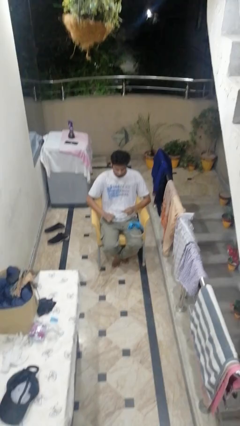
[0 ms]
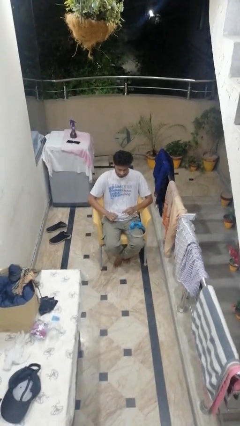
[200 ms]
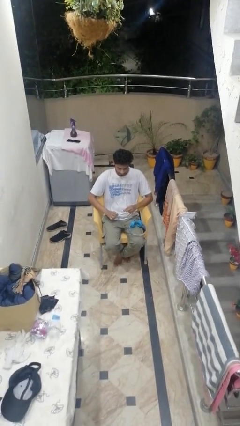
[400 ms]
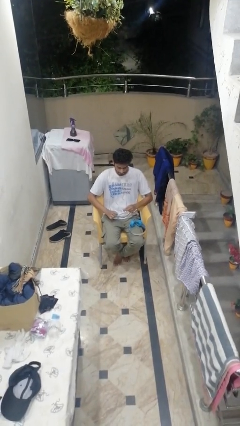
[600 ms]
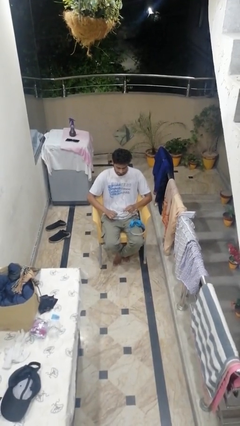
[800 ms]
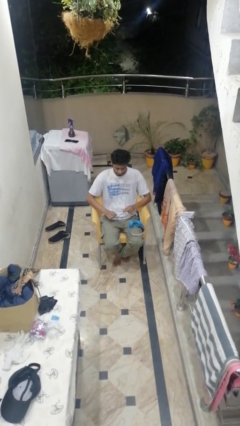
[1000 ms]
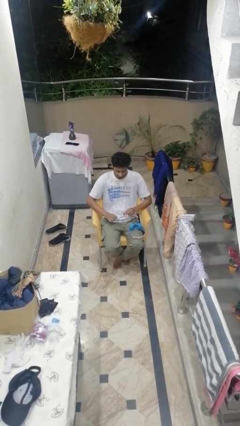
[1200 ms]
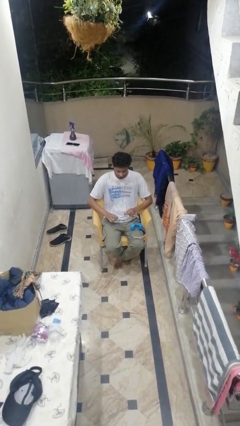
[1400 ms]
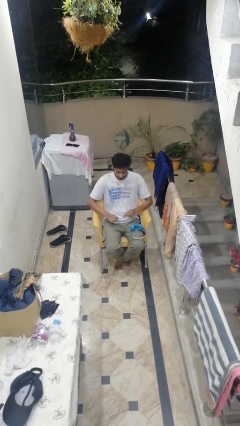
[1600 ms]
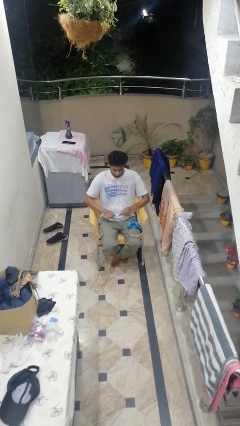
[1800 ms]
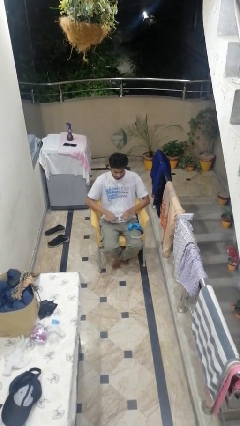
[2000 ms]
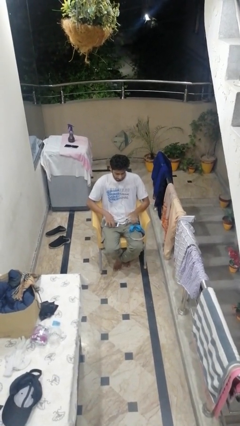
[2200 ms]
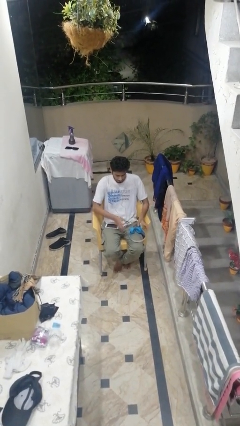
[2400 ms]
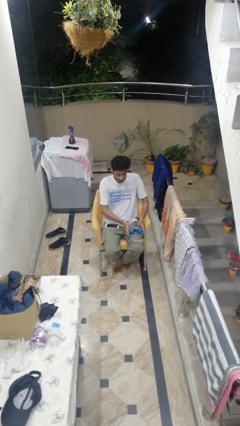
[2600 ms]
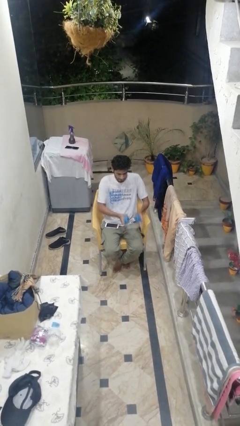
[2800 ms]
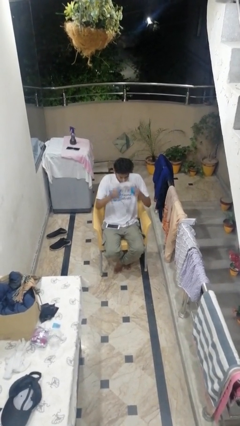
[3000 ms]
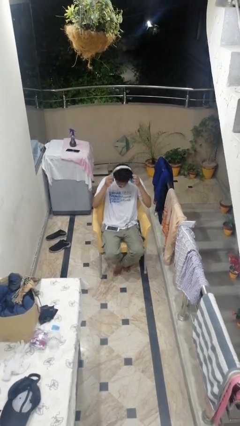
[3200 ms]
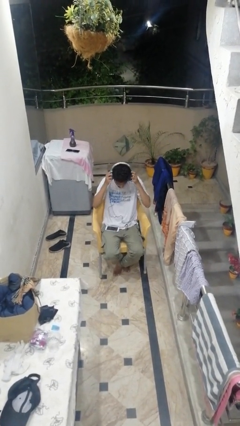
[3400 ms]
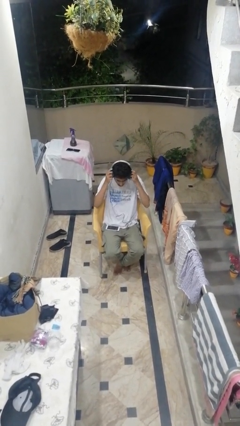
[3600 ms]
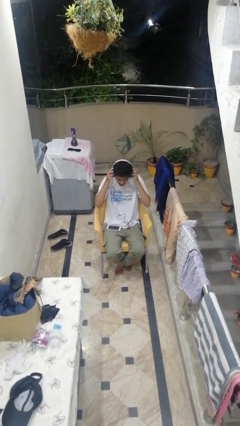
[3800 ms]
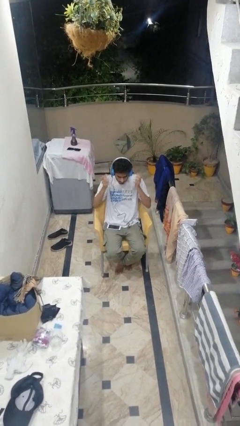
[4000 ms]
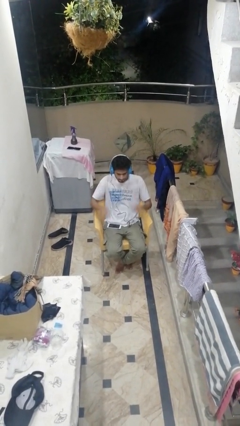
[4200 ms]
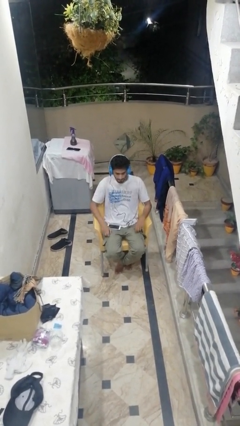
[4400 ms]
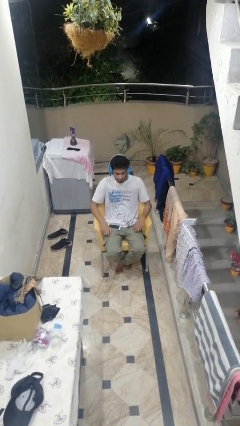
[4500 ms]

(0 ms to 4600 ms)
person puts on headphones

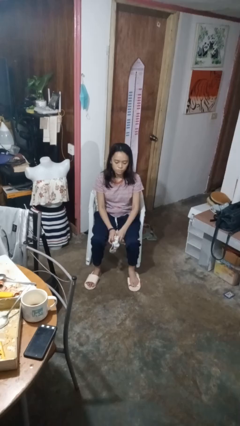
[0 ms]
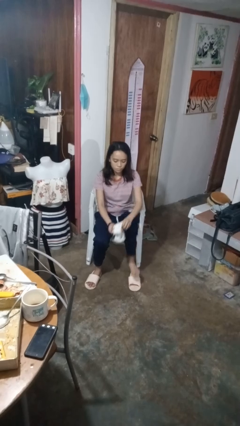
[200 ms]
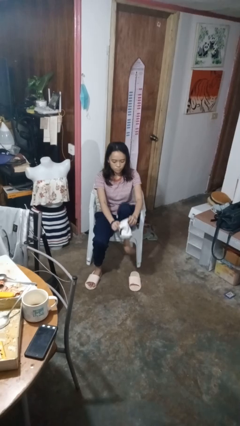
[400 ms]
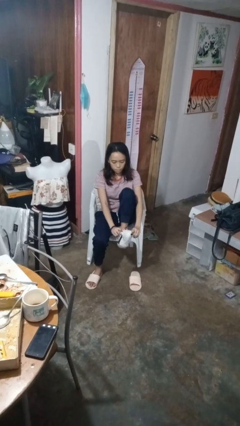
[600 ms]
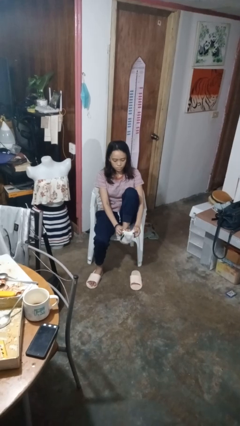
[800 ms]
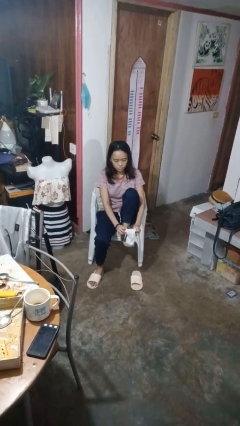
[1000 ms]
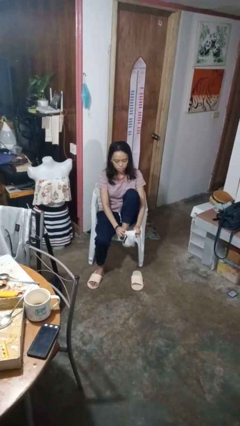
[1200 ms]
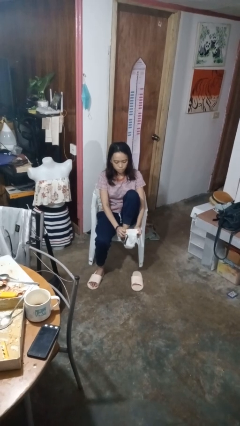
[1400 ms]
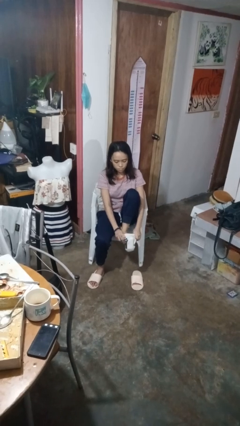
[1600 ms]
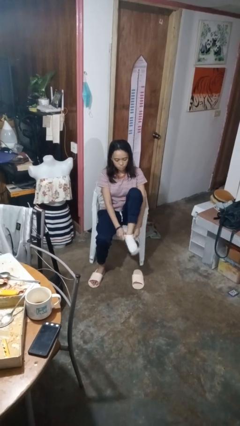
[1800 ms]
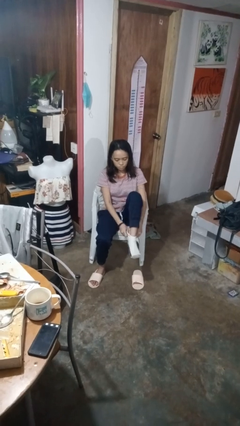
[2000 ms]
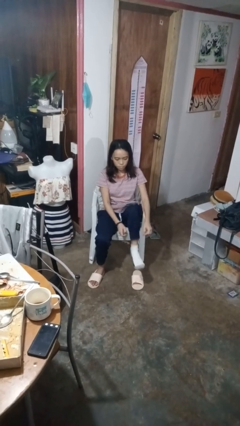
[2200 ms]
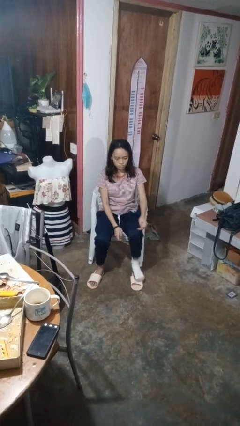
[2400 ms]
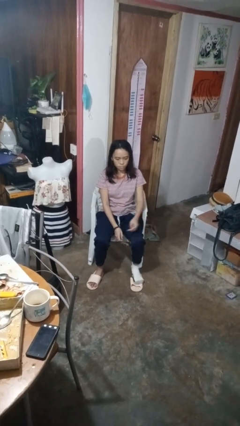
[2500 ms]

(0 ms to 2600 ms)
person puts on socks

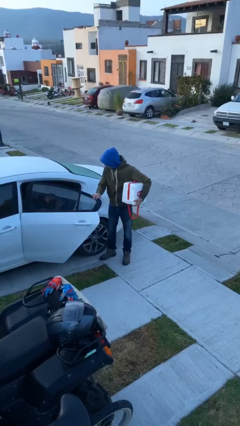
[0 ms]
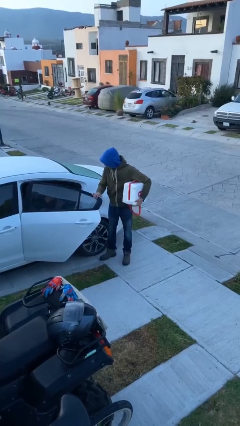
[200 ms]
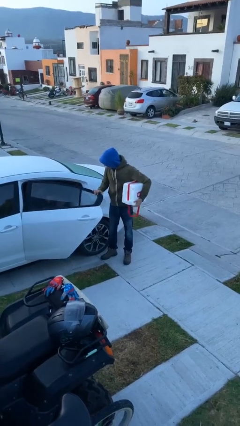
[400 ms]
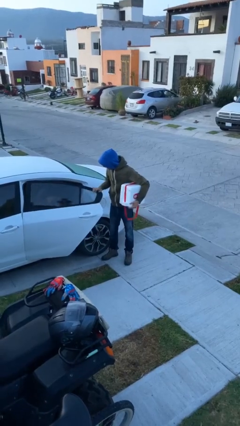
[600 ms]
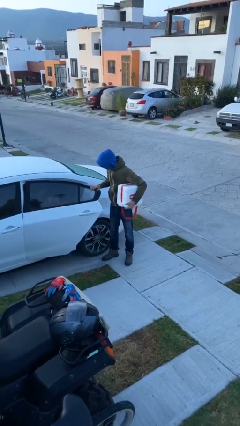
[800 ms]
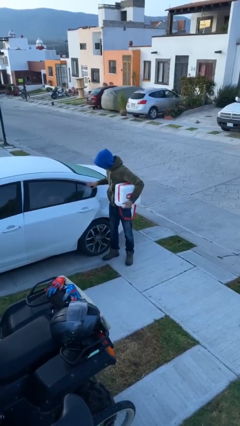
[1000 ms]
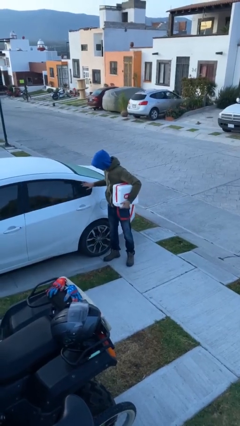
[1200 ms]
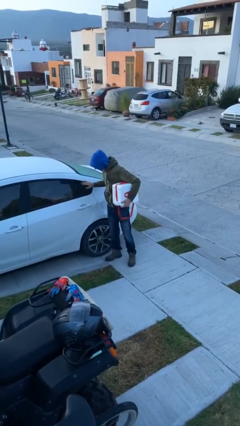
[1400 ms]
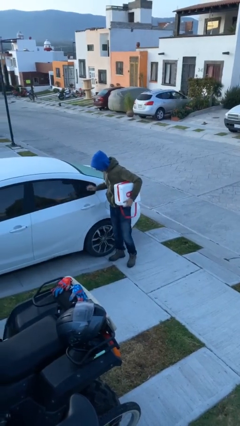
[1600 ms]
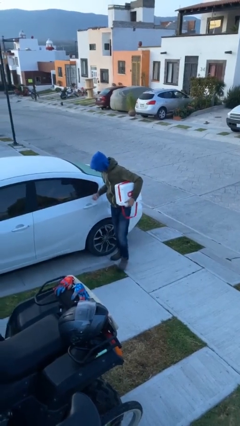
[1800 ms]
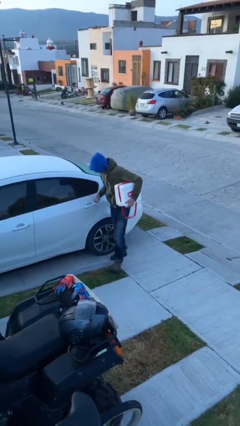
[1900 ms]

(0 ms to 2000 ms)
person closes car door

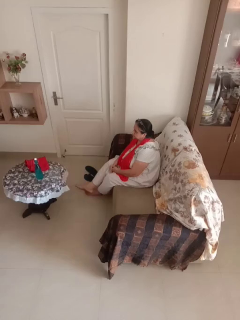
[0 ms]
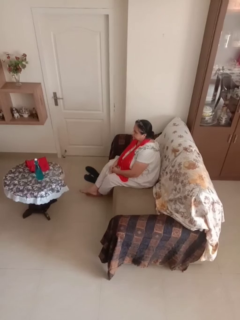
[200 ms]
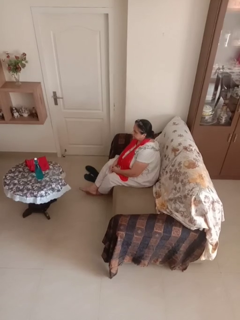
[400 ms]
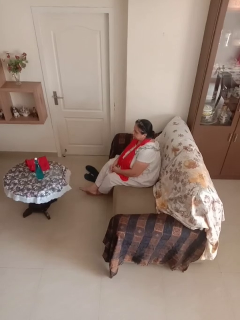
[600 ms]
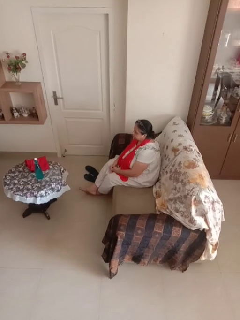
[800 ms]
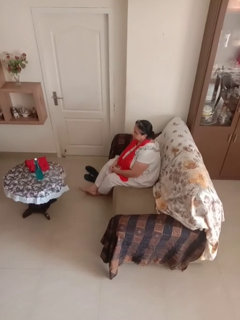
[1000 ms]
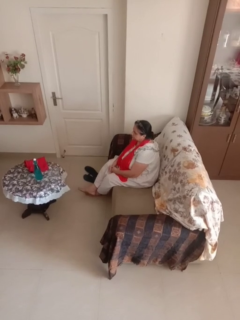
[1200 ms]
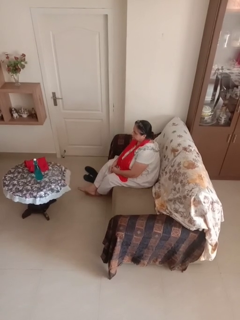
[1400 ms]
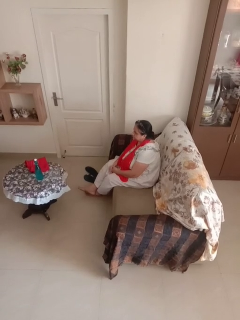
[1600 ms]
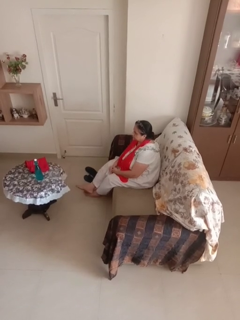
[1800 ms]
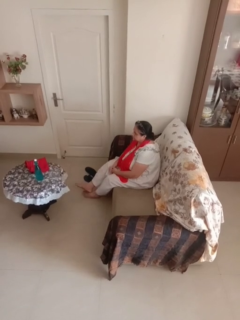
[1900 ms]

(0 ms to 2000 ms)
person crosses legs

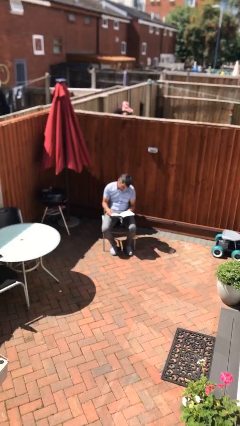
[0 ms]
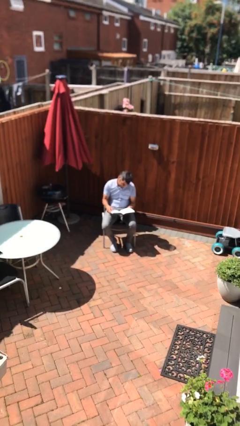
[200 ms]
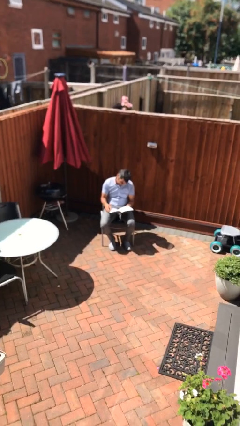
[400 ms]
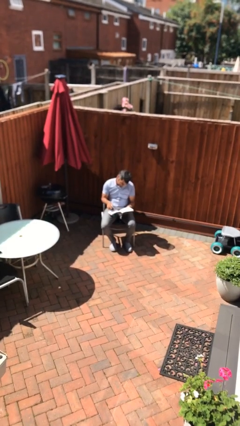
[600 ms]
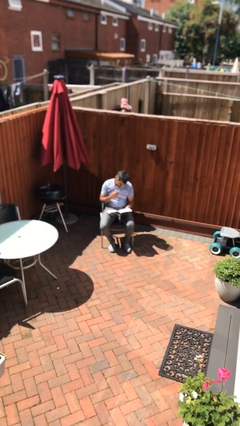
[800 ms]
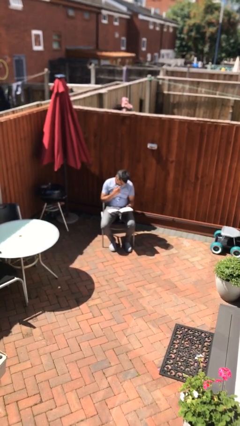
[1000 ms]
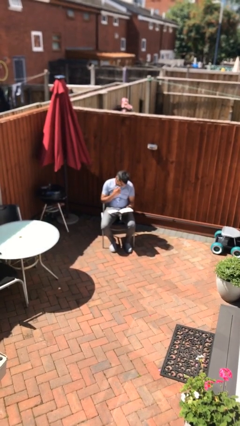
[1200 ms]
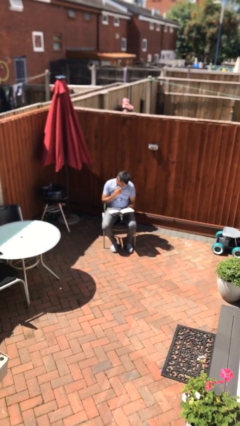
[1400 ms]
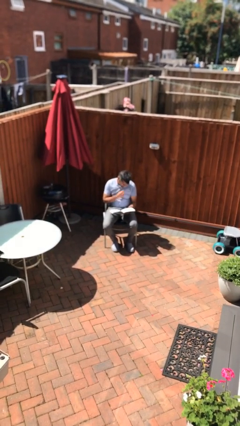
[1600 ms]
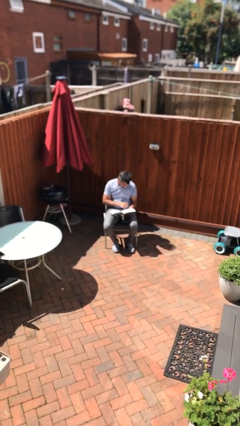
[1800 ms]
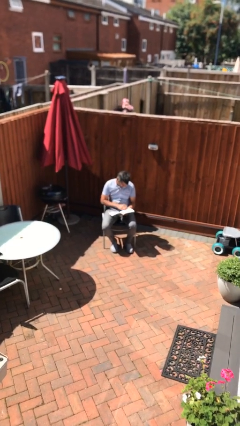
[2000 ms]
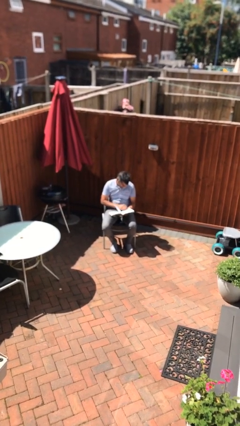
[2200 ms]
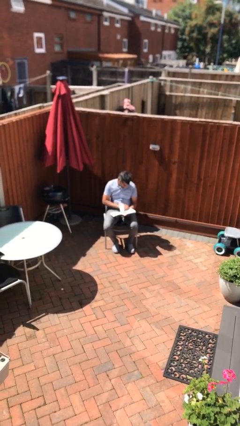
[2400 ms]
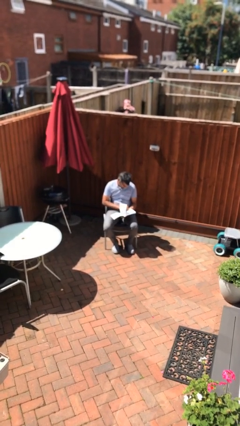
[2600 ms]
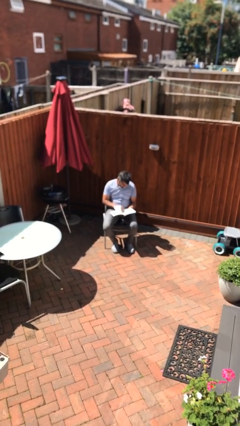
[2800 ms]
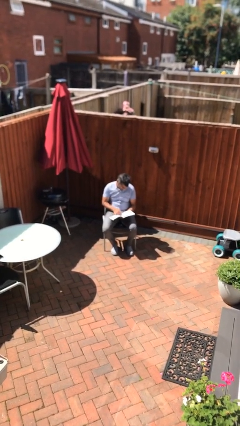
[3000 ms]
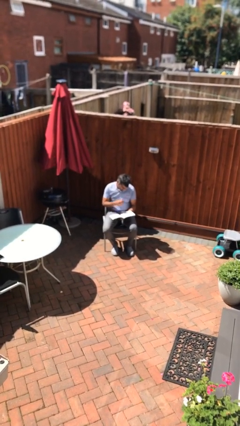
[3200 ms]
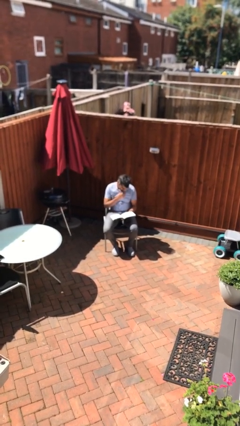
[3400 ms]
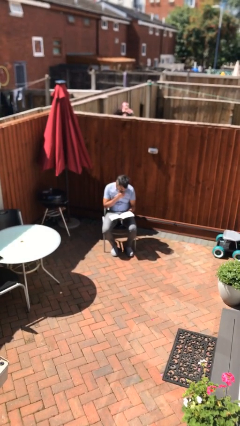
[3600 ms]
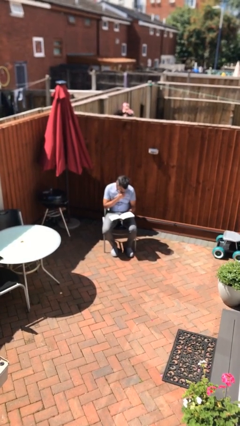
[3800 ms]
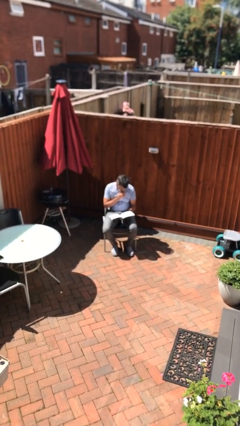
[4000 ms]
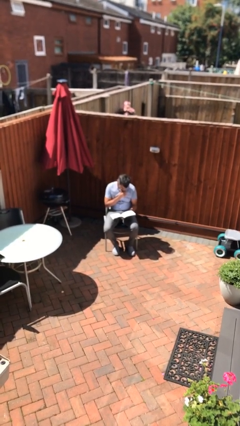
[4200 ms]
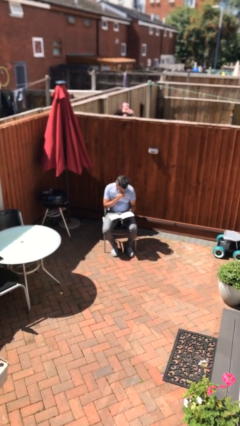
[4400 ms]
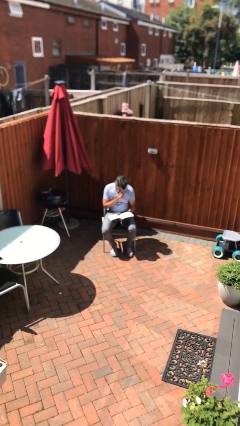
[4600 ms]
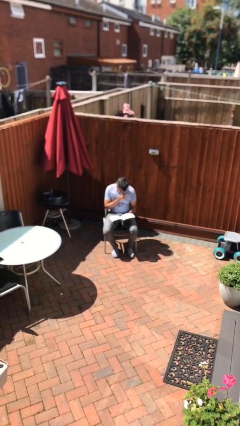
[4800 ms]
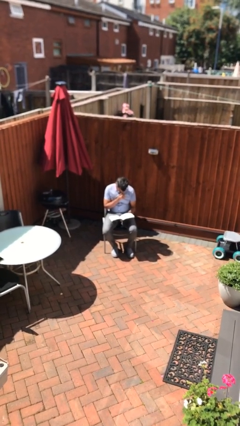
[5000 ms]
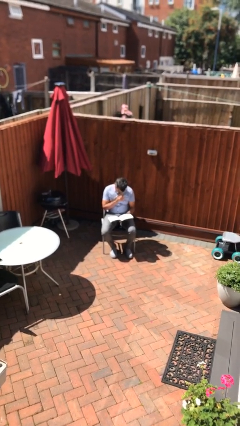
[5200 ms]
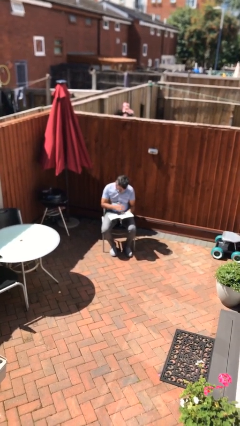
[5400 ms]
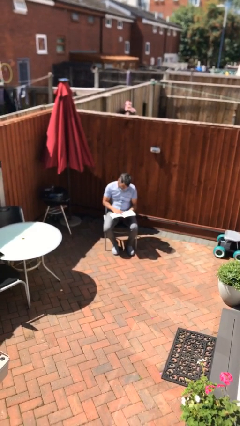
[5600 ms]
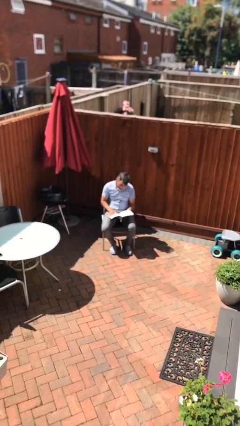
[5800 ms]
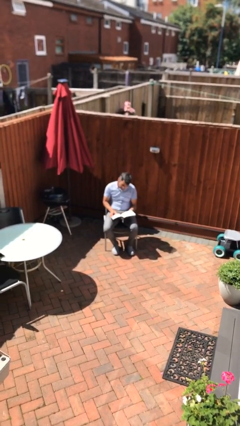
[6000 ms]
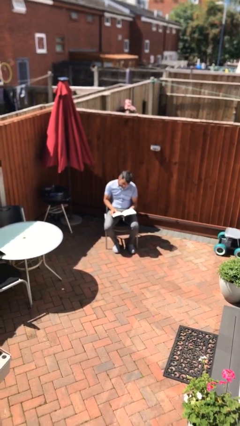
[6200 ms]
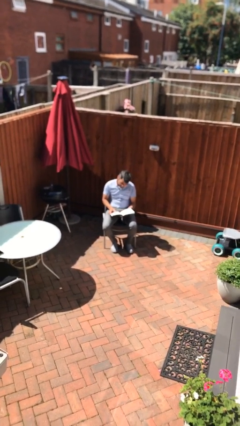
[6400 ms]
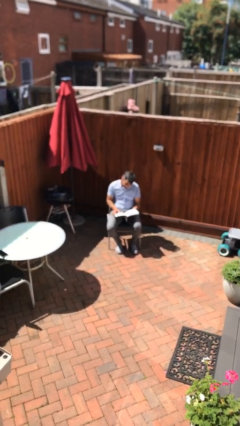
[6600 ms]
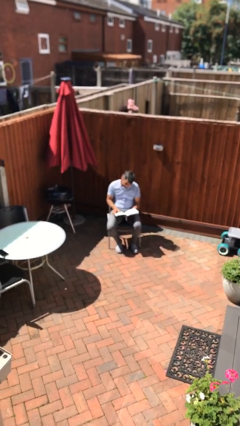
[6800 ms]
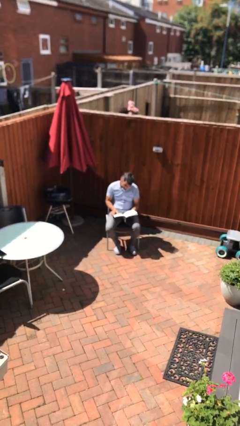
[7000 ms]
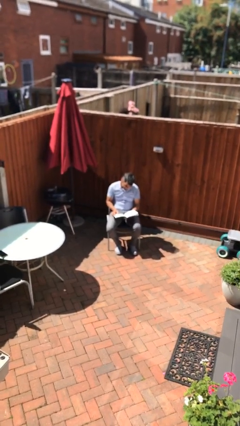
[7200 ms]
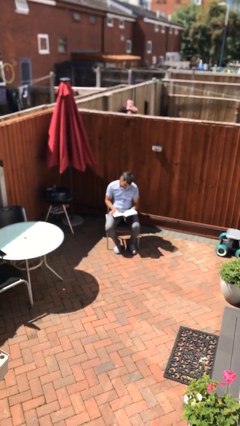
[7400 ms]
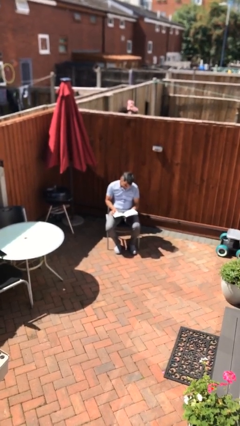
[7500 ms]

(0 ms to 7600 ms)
person reads document
